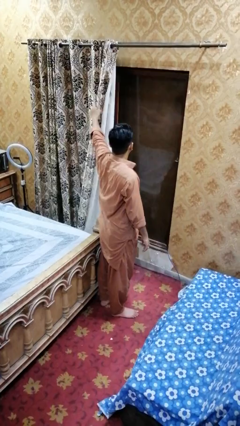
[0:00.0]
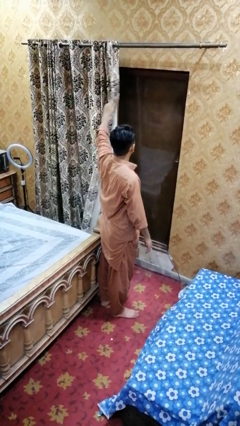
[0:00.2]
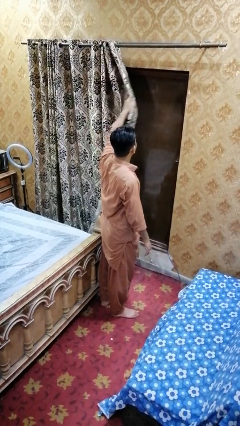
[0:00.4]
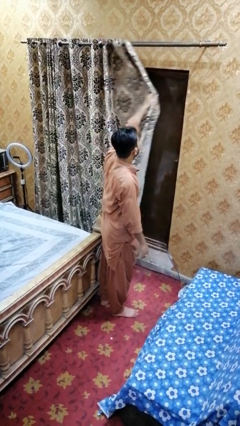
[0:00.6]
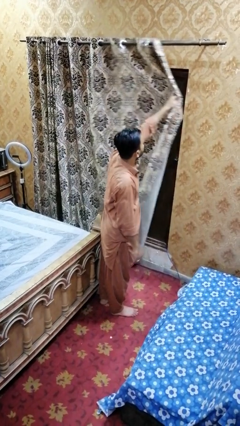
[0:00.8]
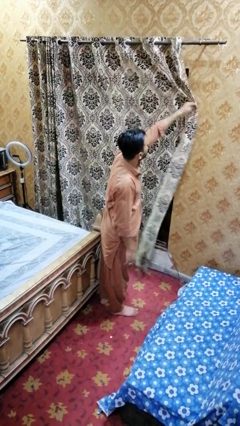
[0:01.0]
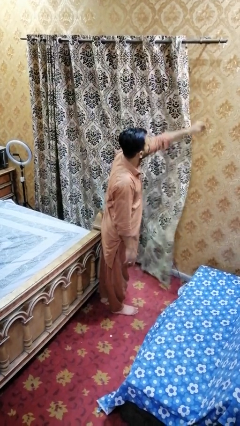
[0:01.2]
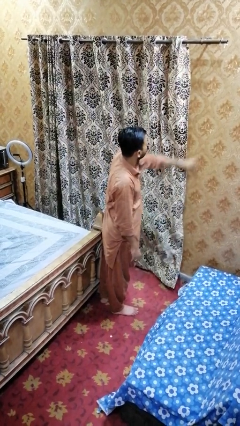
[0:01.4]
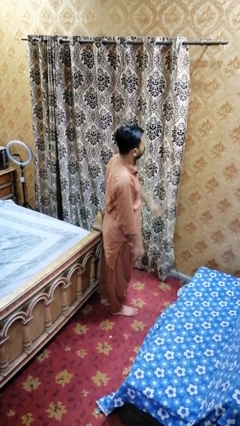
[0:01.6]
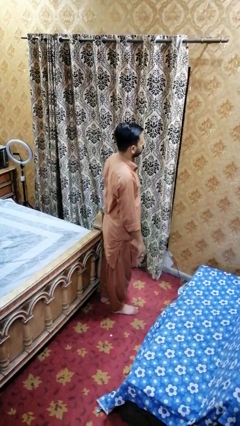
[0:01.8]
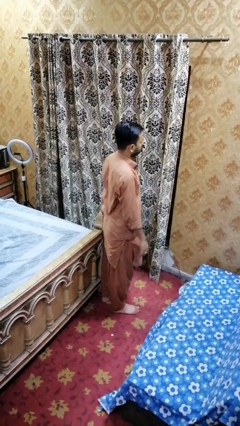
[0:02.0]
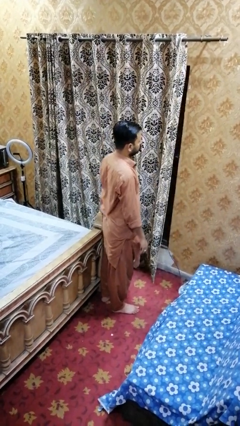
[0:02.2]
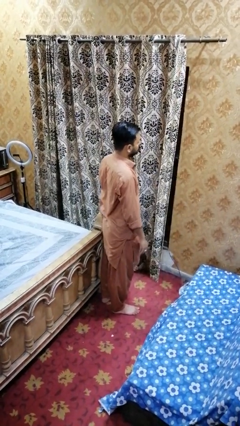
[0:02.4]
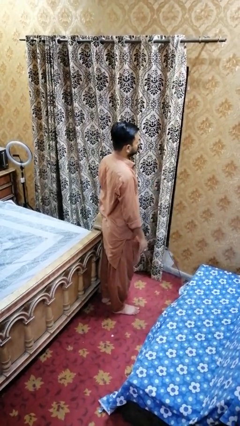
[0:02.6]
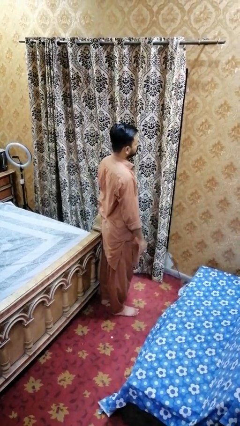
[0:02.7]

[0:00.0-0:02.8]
person closes curtains

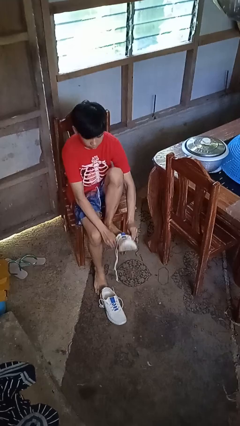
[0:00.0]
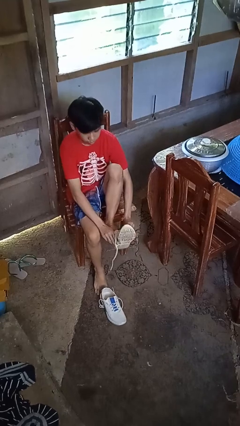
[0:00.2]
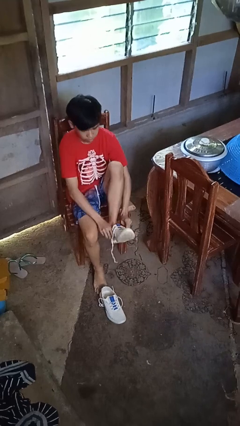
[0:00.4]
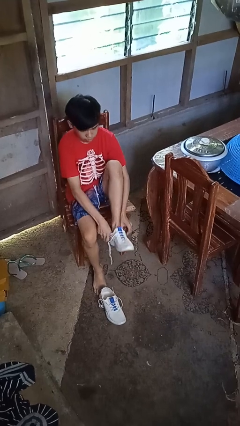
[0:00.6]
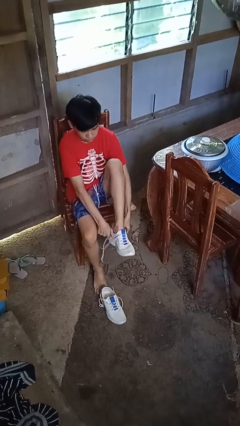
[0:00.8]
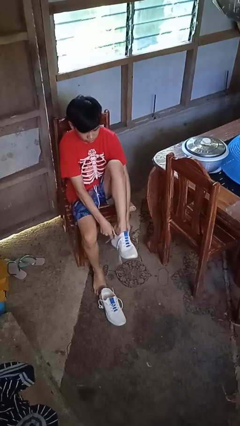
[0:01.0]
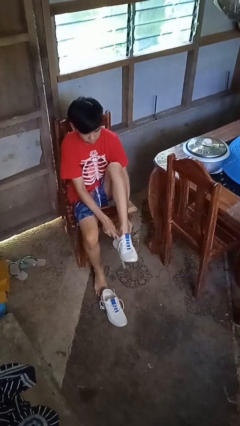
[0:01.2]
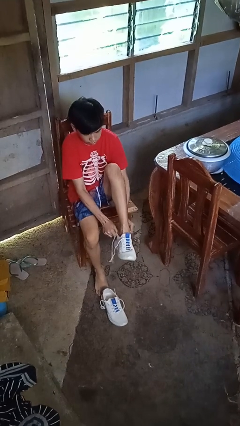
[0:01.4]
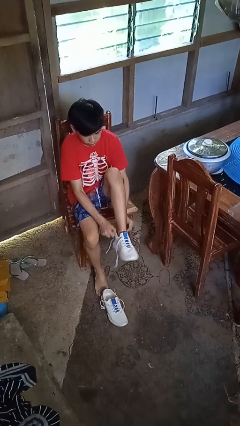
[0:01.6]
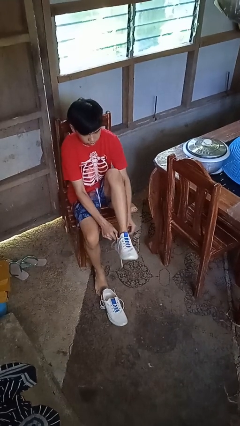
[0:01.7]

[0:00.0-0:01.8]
person puts on shoes

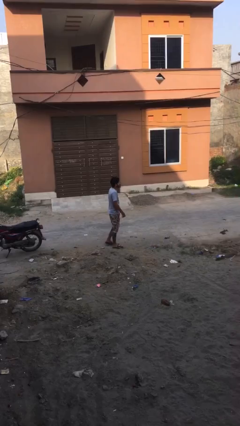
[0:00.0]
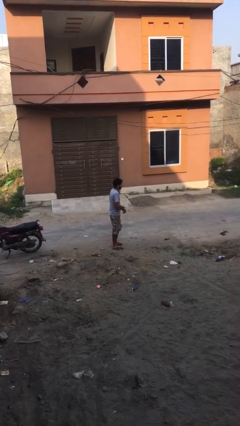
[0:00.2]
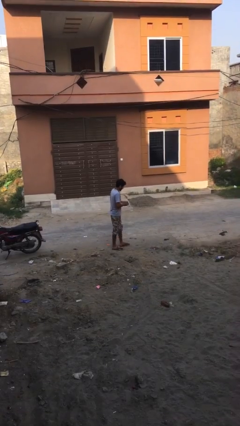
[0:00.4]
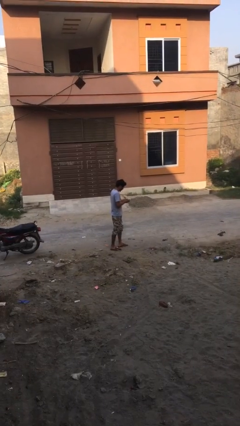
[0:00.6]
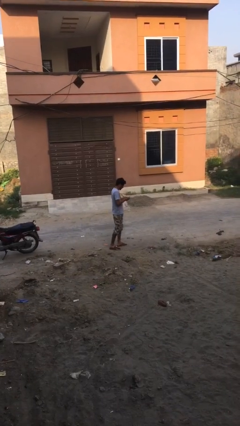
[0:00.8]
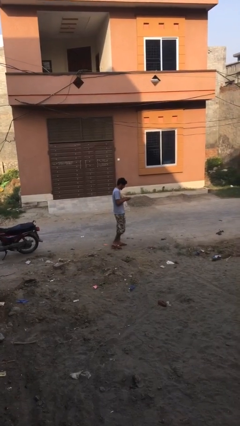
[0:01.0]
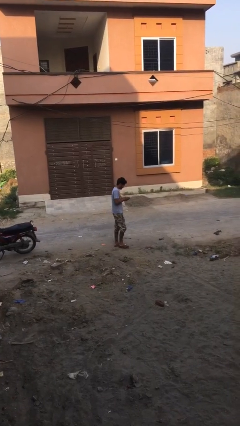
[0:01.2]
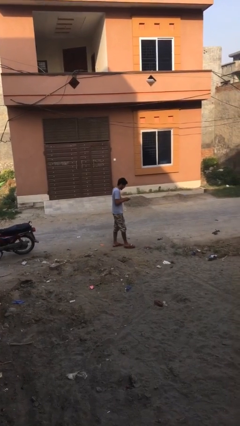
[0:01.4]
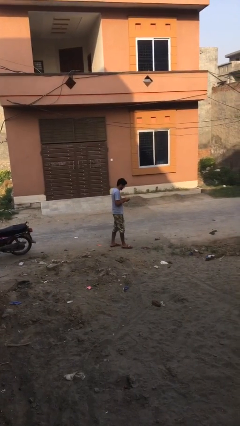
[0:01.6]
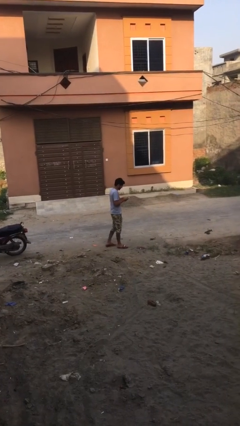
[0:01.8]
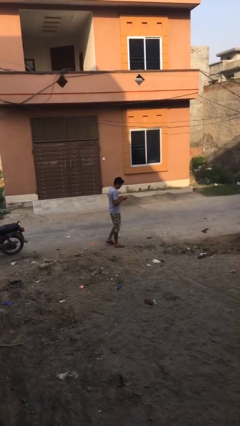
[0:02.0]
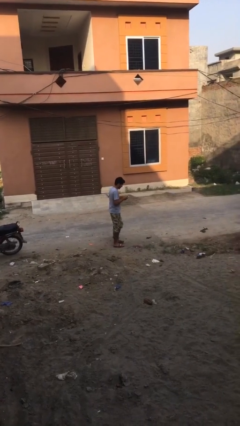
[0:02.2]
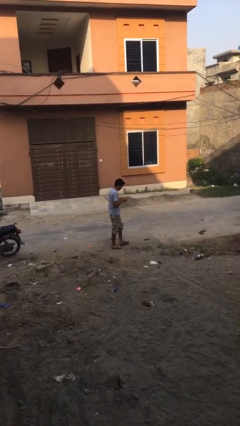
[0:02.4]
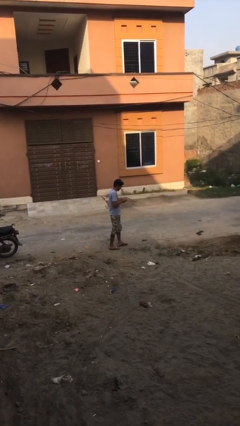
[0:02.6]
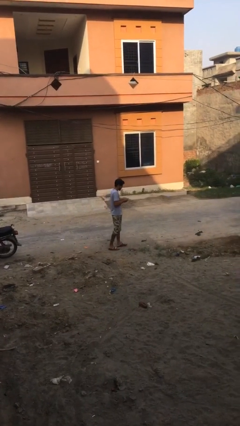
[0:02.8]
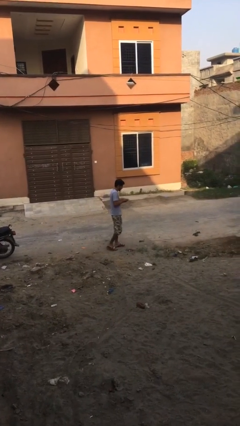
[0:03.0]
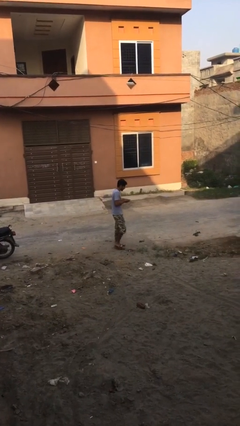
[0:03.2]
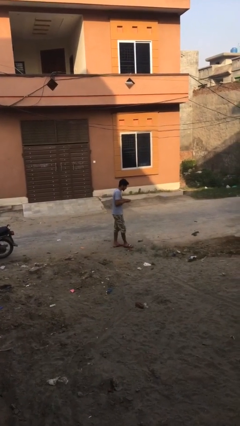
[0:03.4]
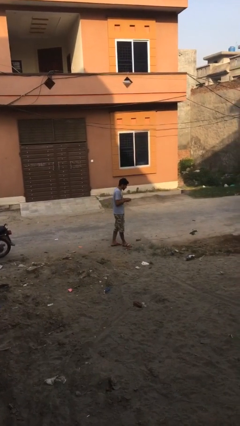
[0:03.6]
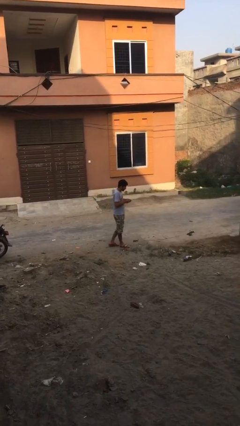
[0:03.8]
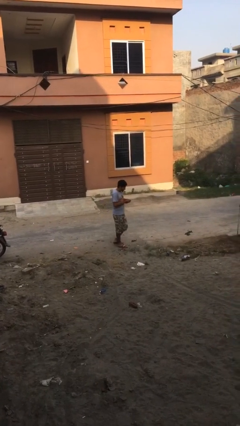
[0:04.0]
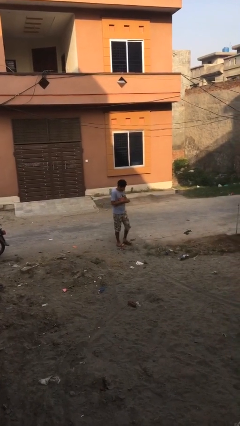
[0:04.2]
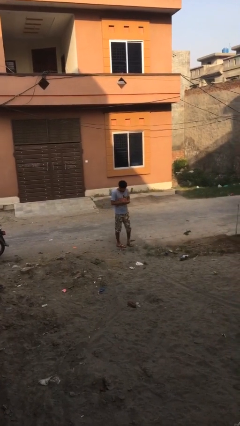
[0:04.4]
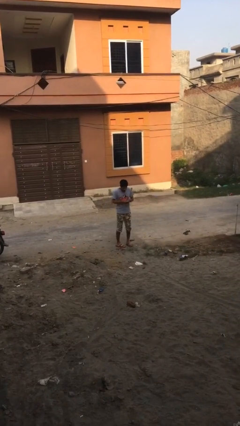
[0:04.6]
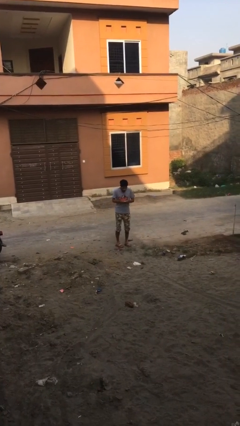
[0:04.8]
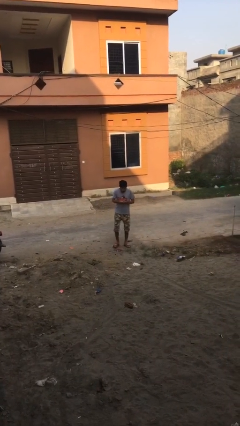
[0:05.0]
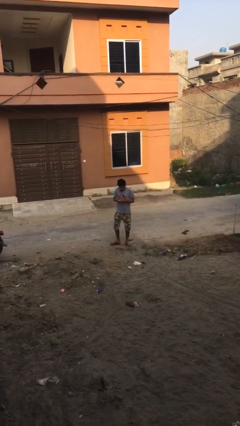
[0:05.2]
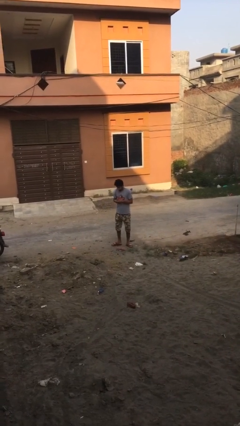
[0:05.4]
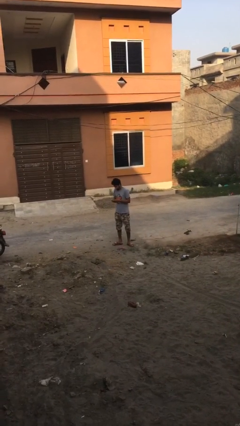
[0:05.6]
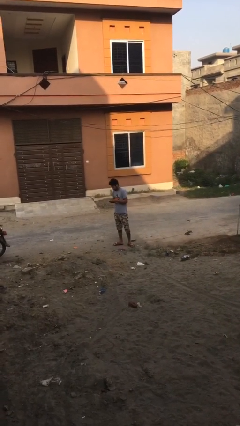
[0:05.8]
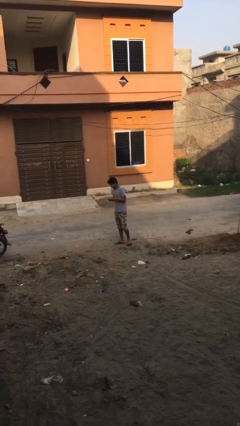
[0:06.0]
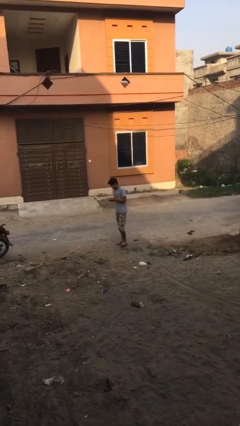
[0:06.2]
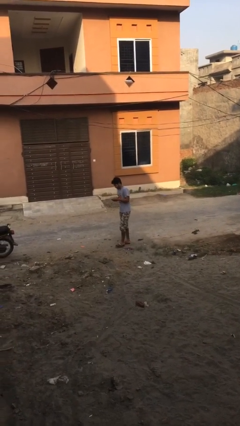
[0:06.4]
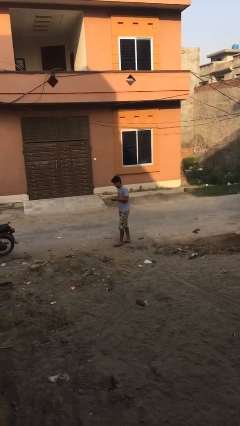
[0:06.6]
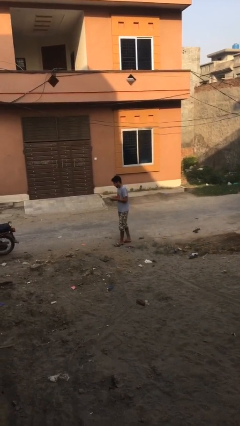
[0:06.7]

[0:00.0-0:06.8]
person texts on phone

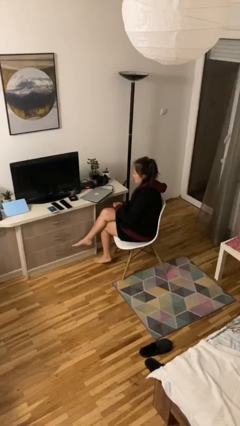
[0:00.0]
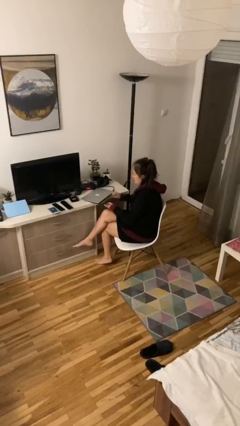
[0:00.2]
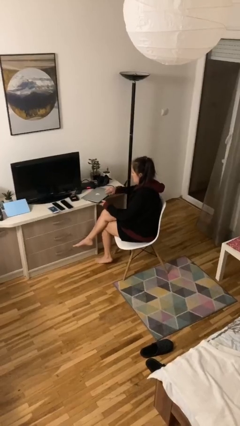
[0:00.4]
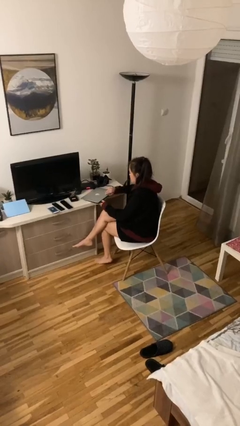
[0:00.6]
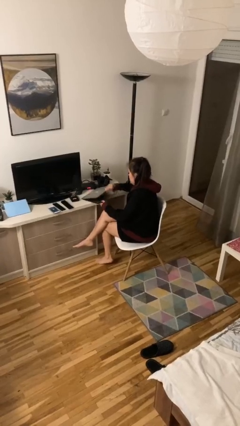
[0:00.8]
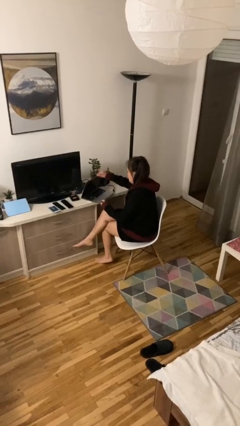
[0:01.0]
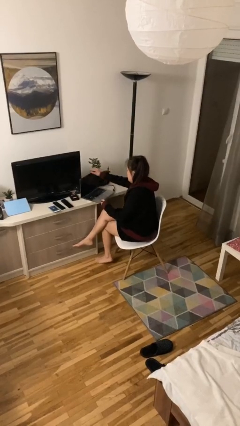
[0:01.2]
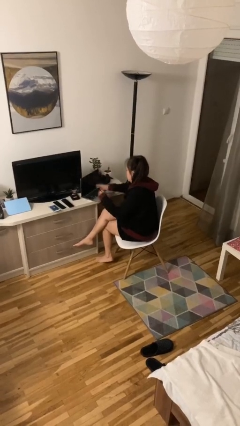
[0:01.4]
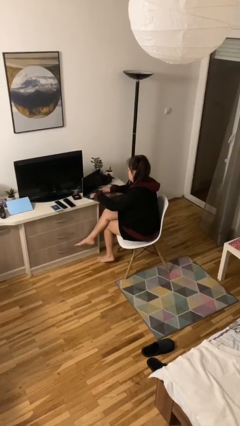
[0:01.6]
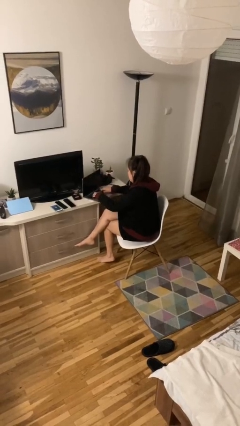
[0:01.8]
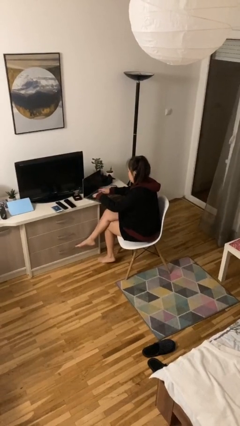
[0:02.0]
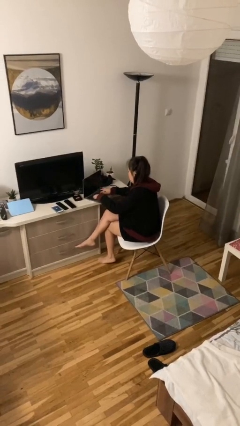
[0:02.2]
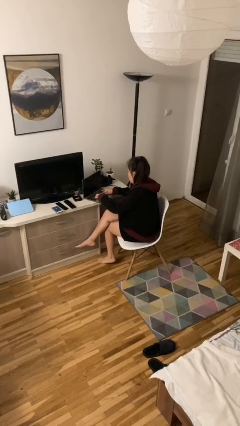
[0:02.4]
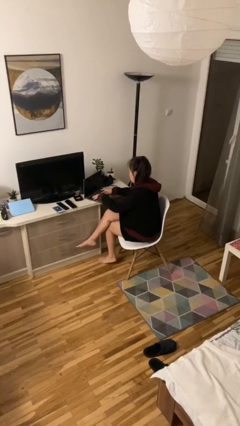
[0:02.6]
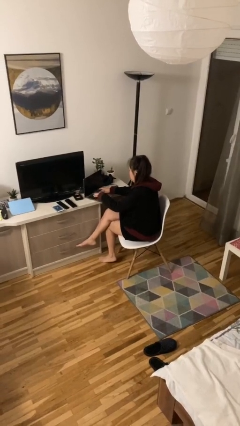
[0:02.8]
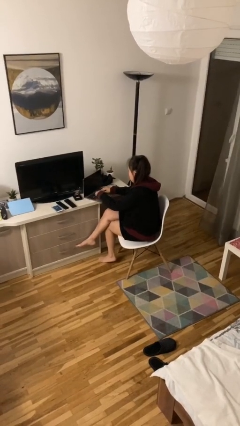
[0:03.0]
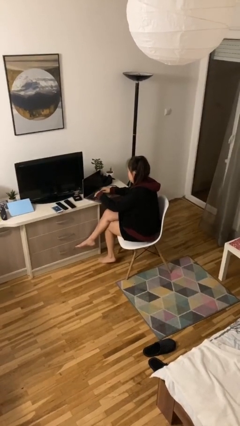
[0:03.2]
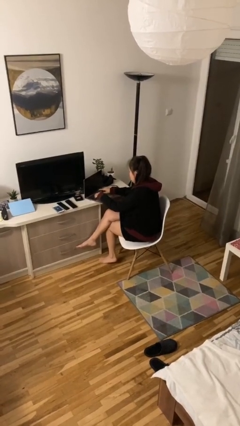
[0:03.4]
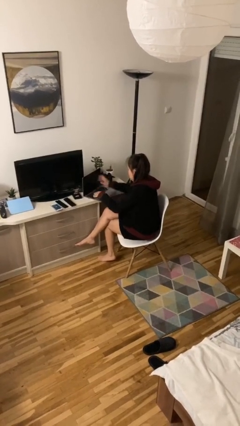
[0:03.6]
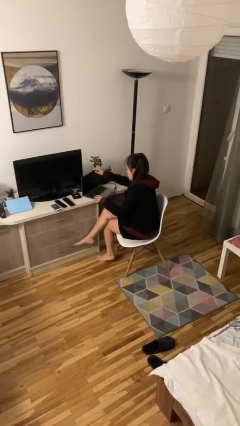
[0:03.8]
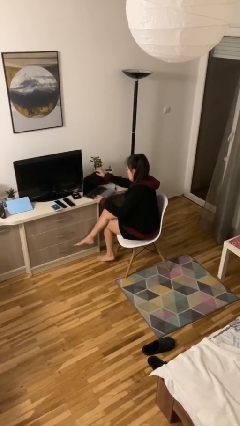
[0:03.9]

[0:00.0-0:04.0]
person interacts with laptop

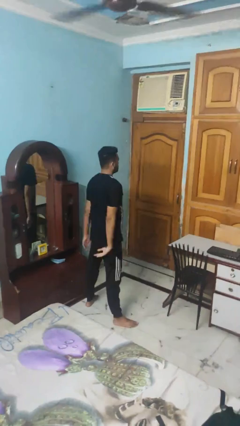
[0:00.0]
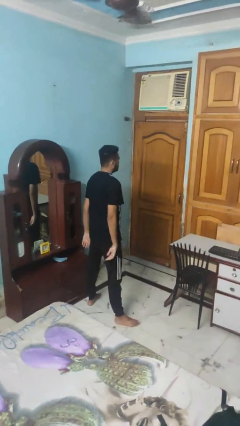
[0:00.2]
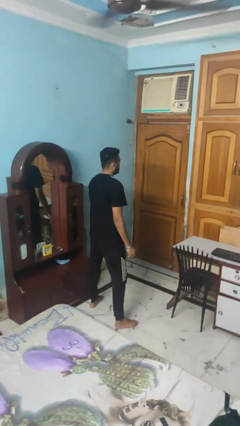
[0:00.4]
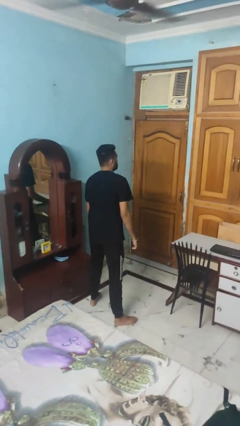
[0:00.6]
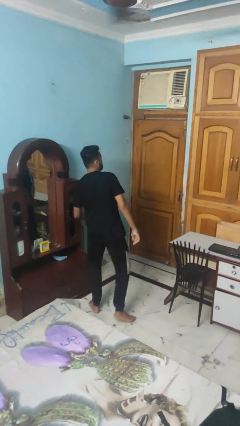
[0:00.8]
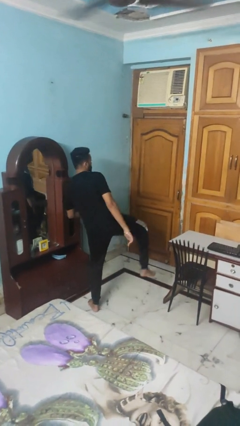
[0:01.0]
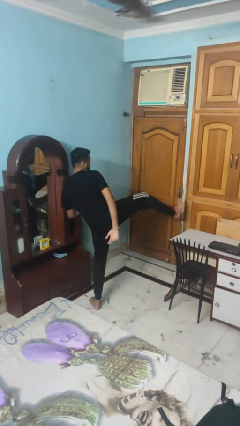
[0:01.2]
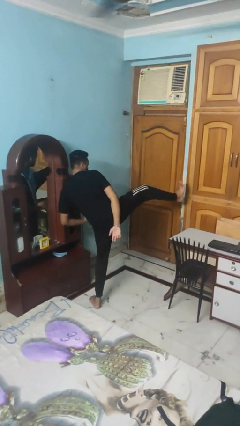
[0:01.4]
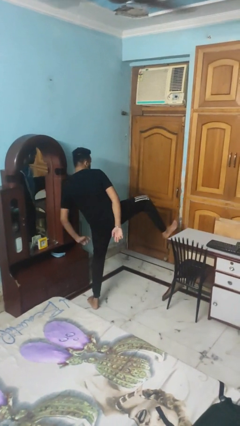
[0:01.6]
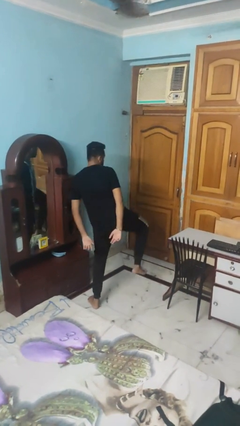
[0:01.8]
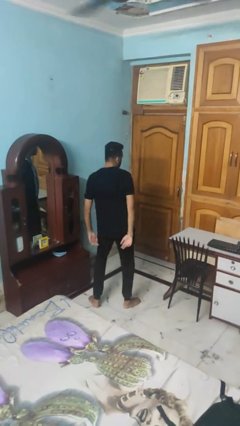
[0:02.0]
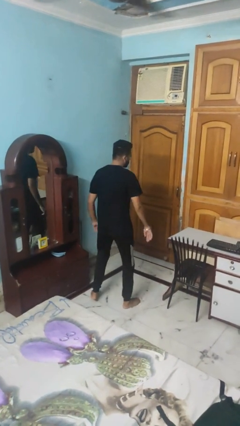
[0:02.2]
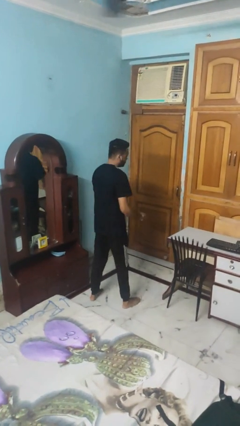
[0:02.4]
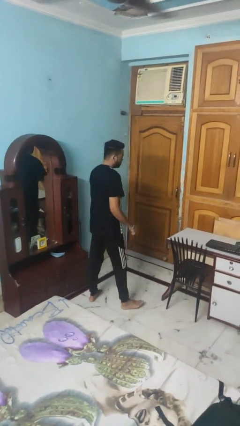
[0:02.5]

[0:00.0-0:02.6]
person karate kicks
